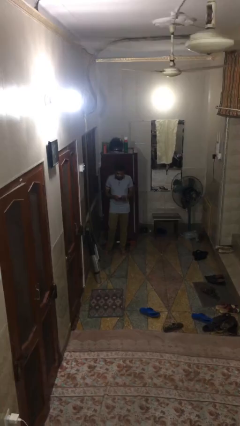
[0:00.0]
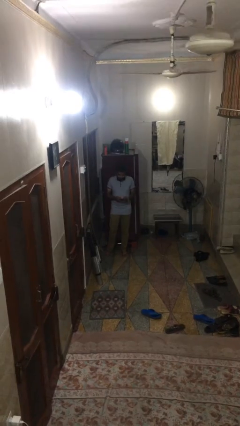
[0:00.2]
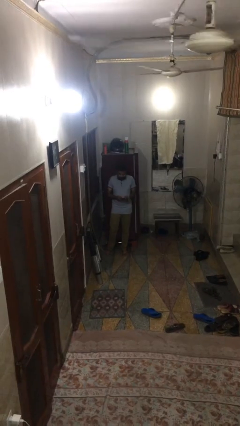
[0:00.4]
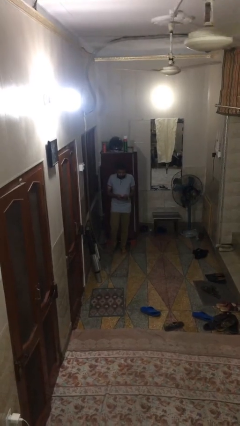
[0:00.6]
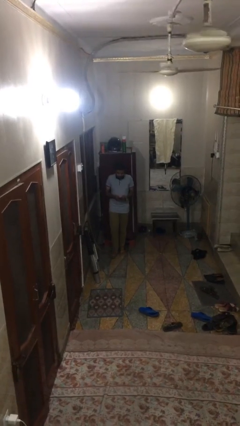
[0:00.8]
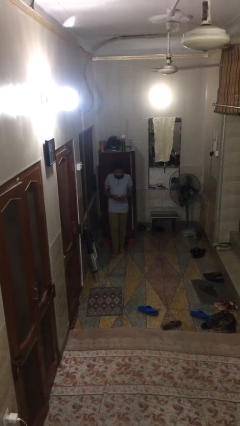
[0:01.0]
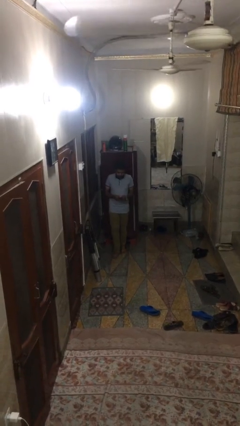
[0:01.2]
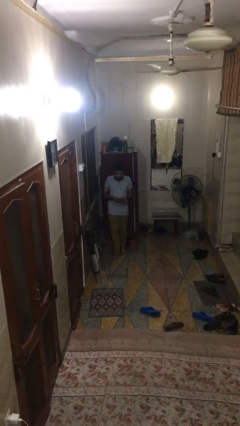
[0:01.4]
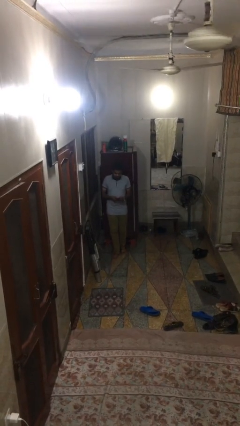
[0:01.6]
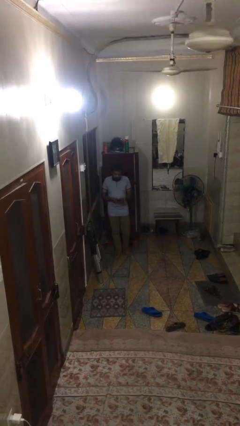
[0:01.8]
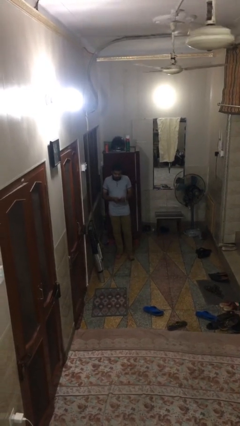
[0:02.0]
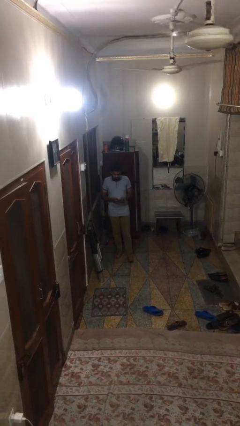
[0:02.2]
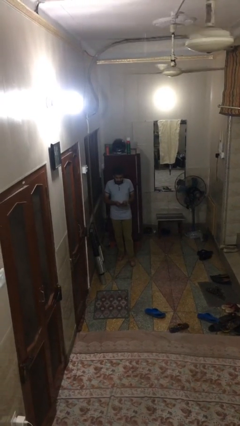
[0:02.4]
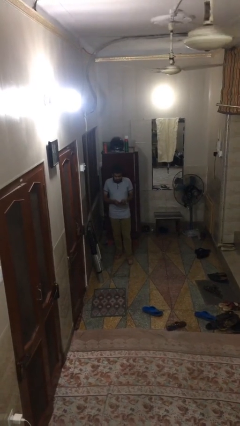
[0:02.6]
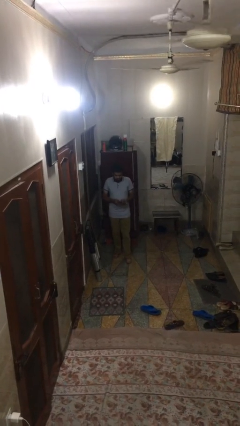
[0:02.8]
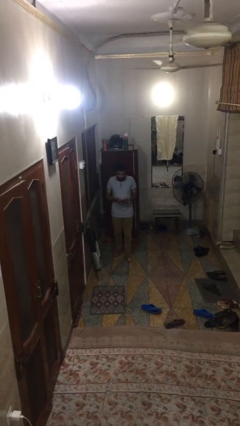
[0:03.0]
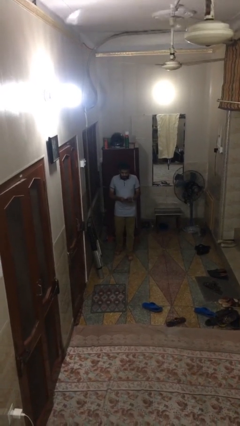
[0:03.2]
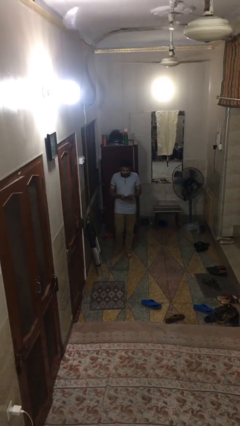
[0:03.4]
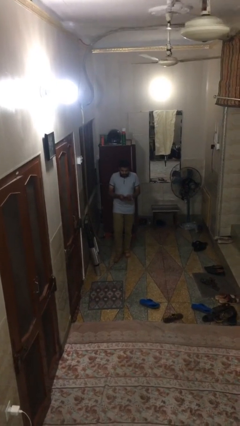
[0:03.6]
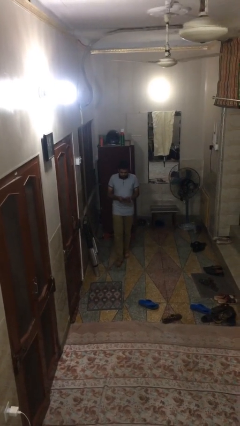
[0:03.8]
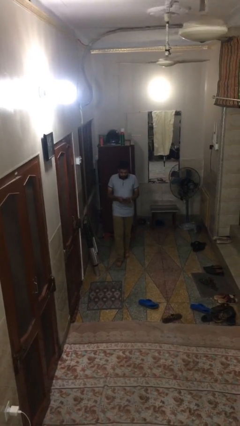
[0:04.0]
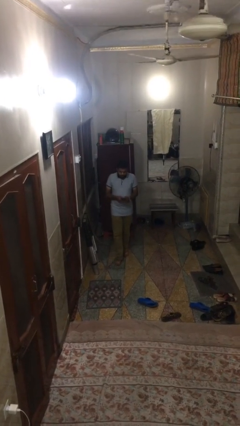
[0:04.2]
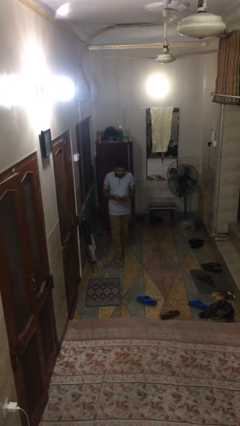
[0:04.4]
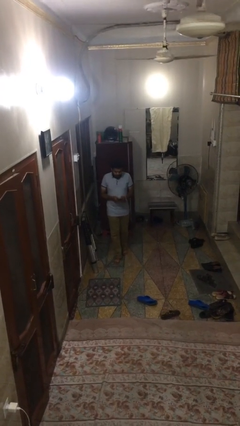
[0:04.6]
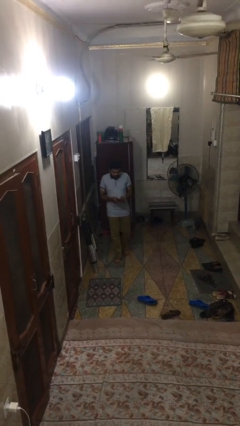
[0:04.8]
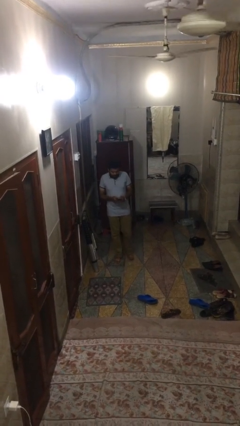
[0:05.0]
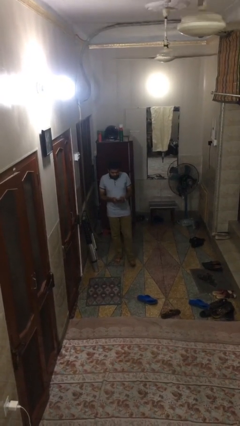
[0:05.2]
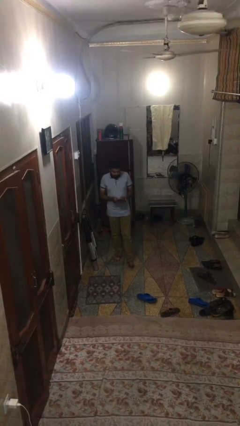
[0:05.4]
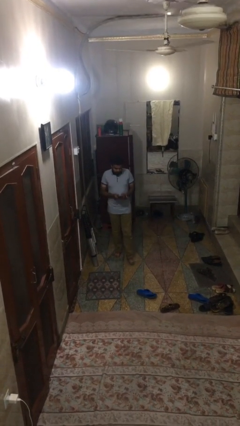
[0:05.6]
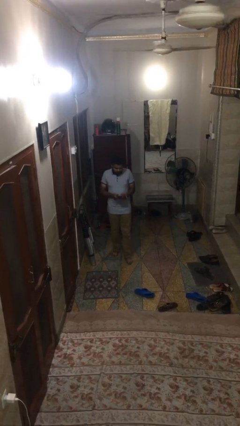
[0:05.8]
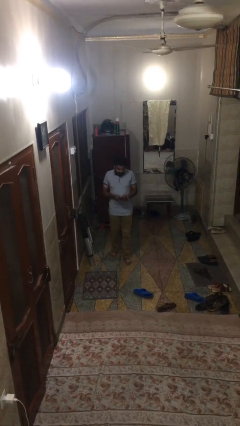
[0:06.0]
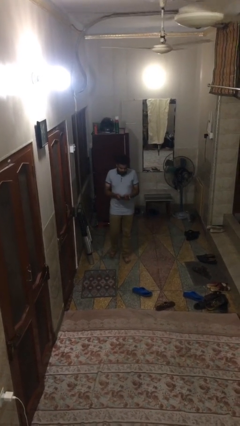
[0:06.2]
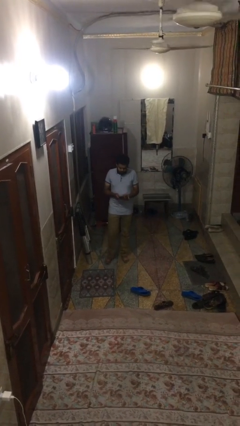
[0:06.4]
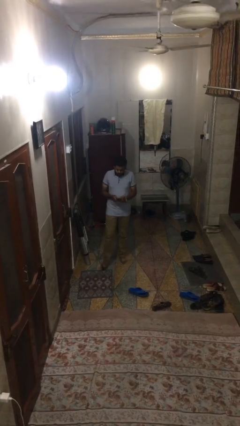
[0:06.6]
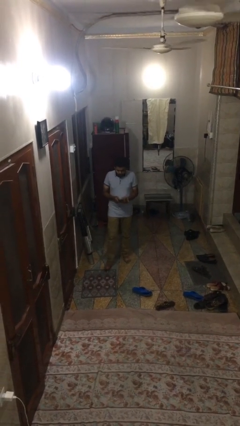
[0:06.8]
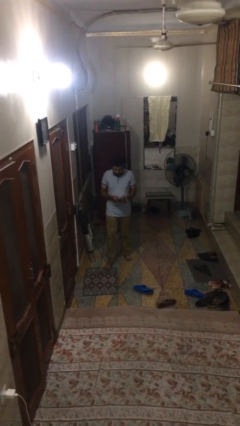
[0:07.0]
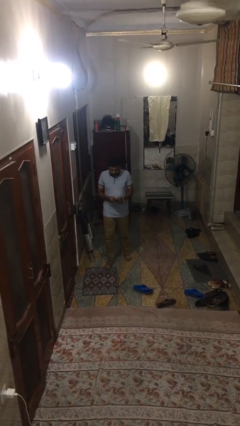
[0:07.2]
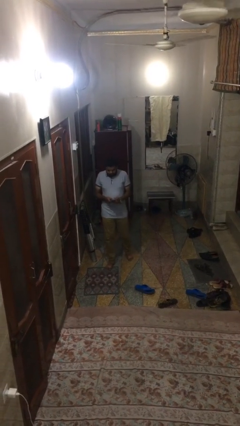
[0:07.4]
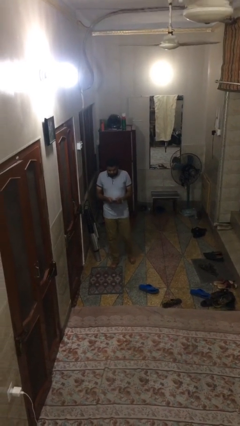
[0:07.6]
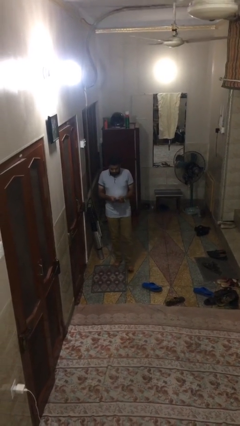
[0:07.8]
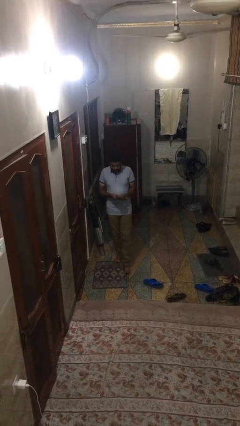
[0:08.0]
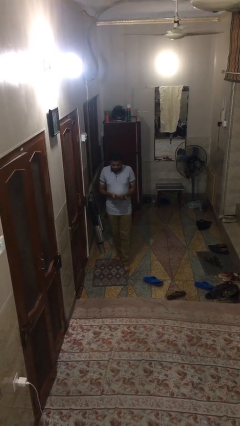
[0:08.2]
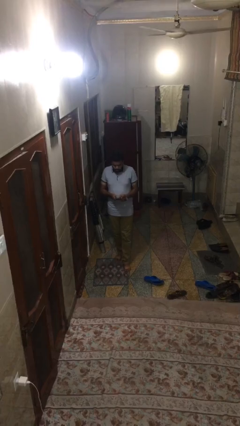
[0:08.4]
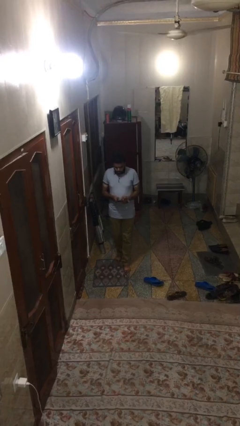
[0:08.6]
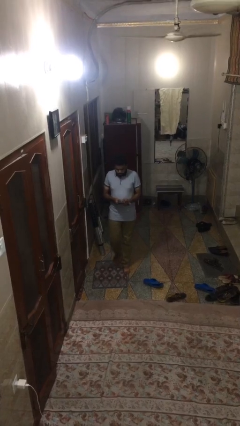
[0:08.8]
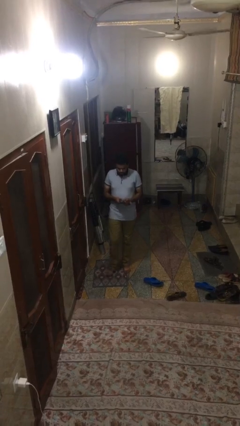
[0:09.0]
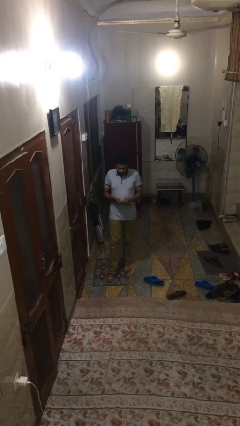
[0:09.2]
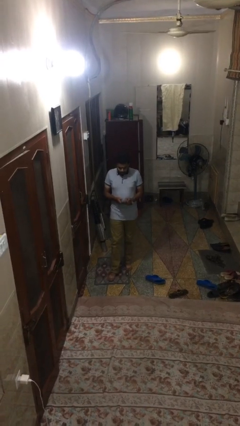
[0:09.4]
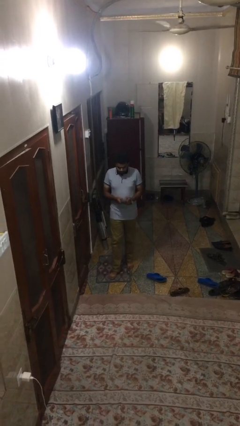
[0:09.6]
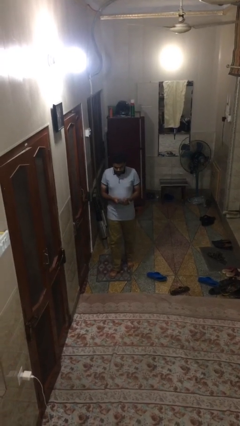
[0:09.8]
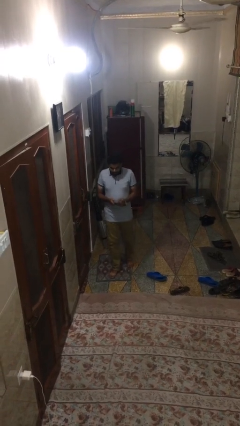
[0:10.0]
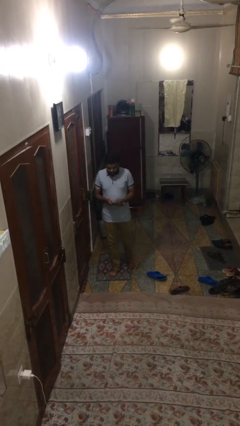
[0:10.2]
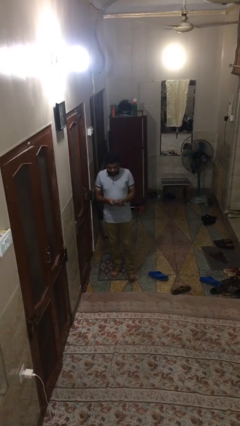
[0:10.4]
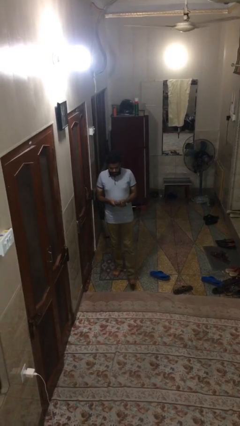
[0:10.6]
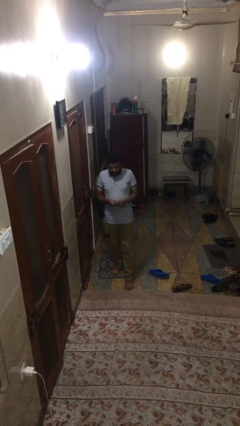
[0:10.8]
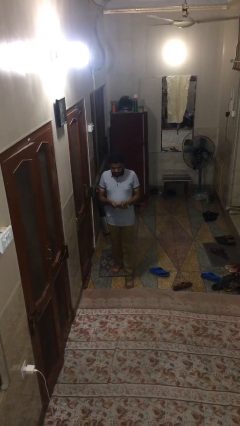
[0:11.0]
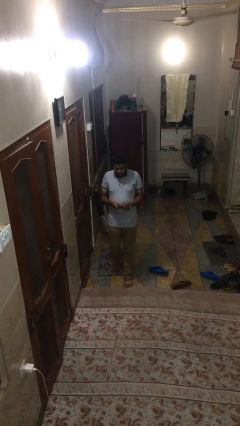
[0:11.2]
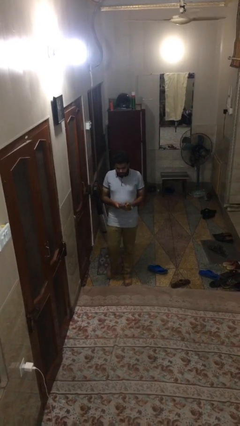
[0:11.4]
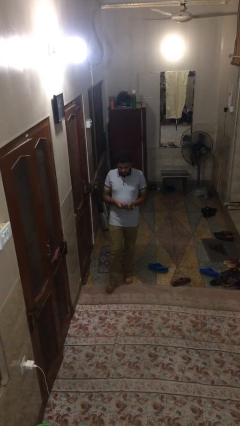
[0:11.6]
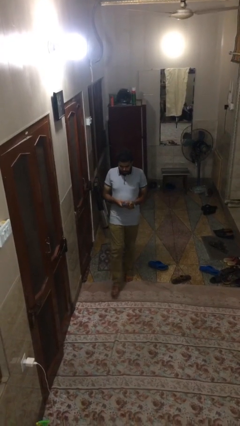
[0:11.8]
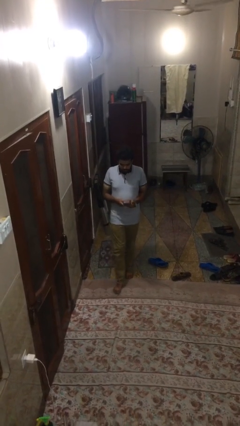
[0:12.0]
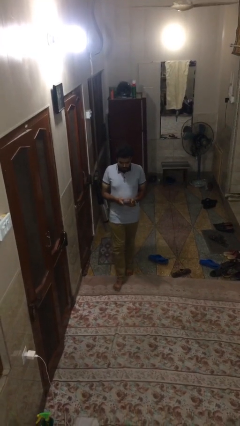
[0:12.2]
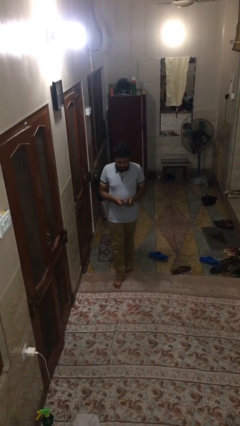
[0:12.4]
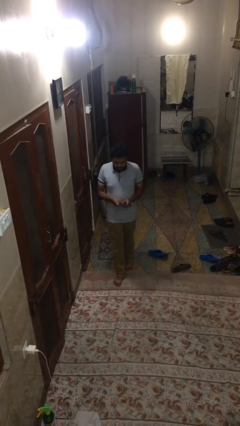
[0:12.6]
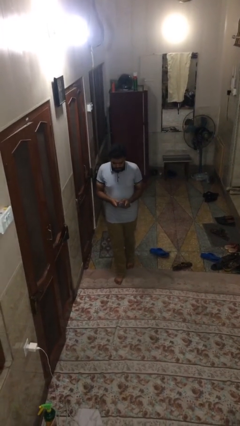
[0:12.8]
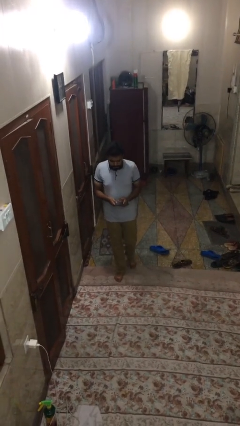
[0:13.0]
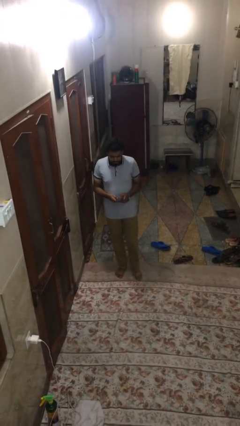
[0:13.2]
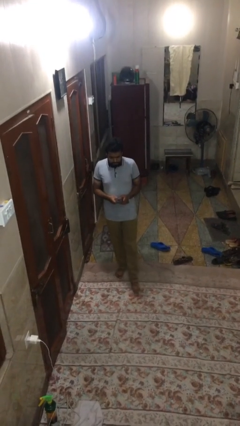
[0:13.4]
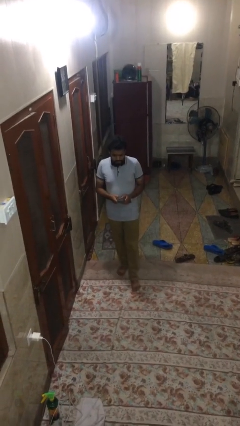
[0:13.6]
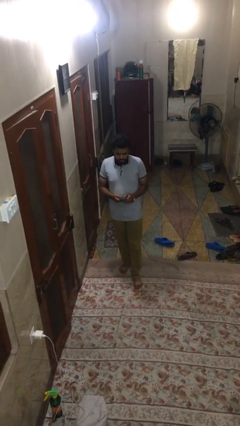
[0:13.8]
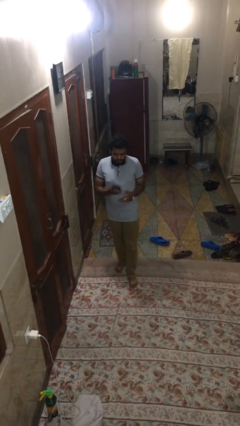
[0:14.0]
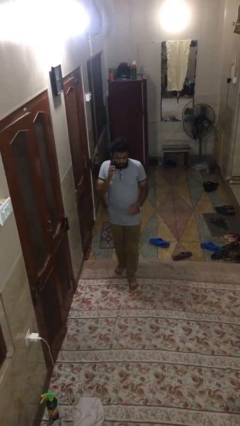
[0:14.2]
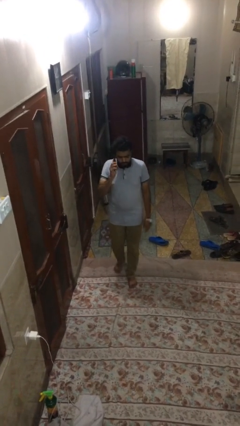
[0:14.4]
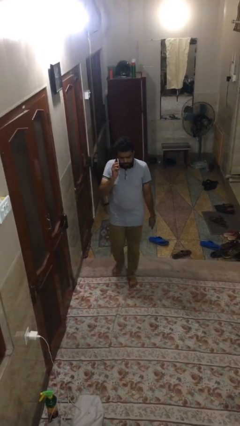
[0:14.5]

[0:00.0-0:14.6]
person texts on phone

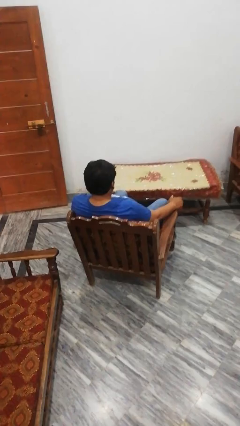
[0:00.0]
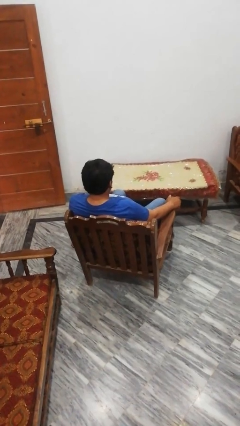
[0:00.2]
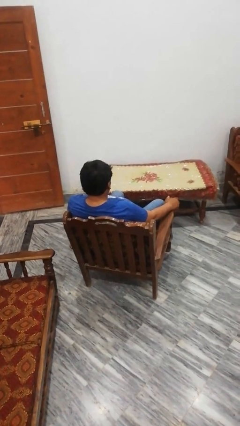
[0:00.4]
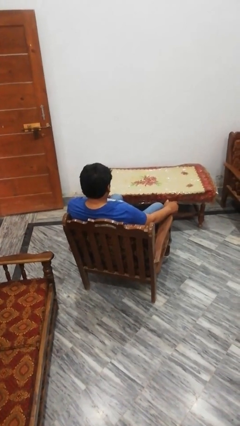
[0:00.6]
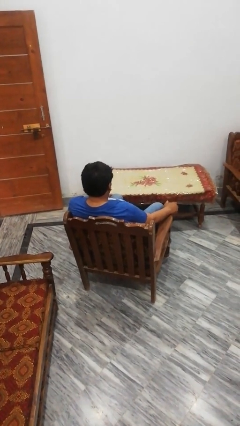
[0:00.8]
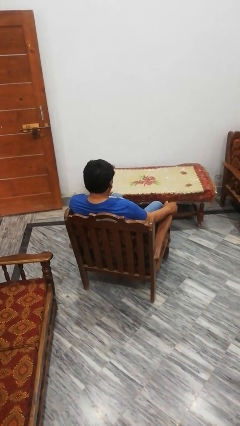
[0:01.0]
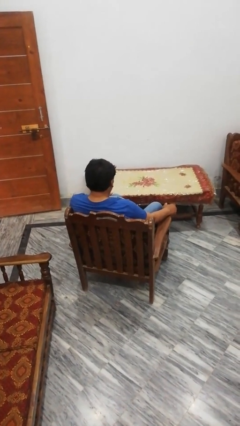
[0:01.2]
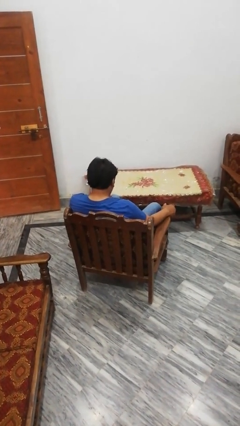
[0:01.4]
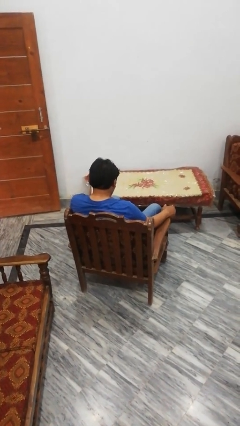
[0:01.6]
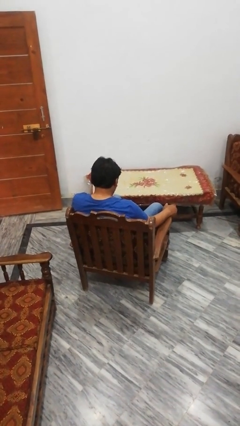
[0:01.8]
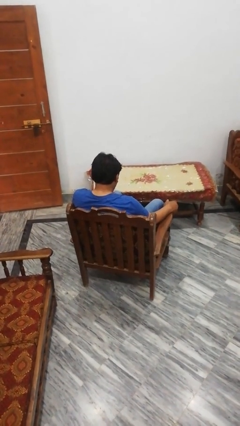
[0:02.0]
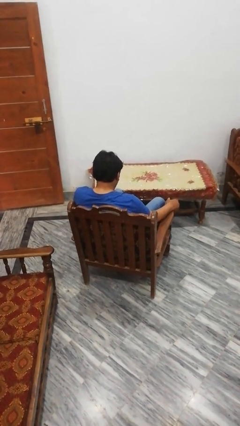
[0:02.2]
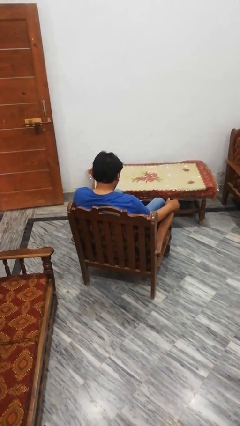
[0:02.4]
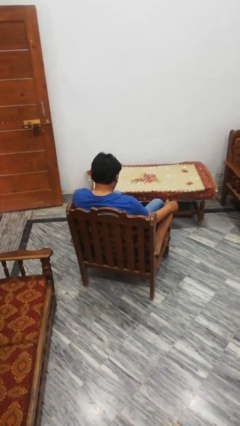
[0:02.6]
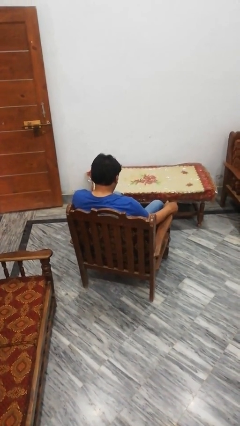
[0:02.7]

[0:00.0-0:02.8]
person pushes in chair

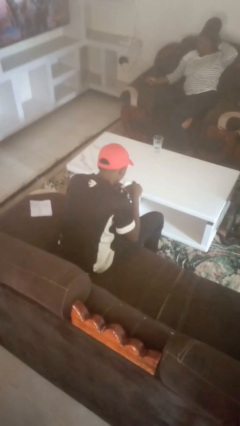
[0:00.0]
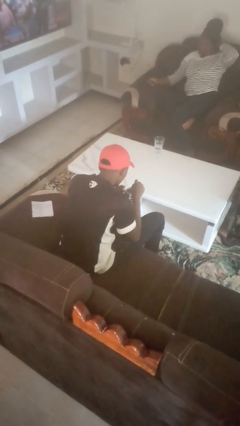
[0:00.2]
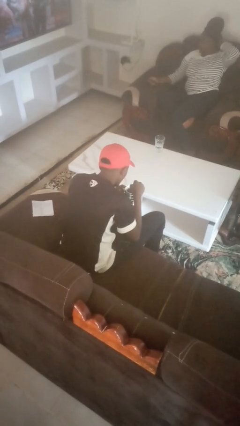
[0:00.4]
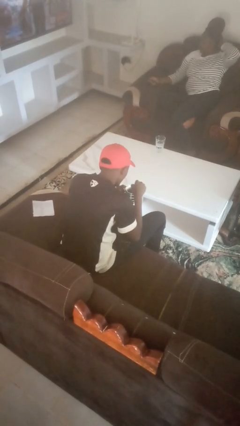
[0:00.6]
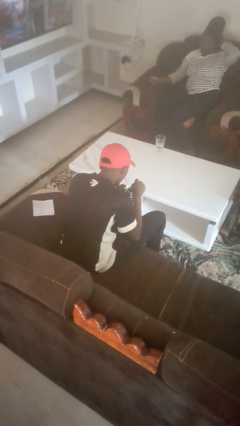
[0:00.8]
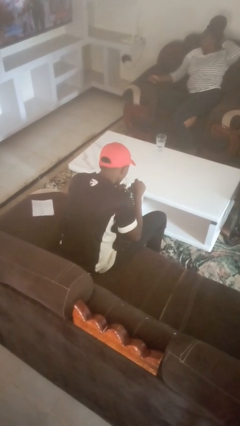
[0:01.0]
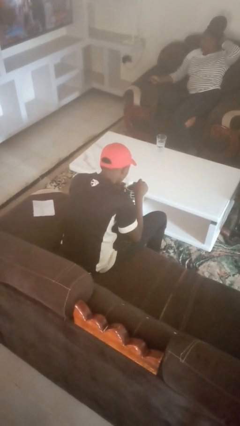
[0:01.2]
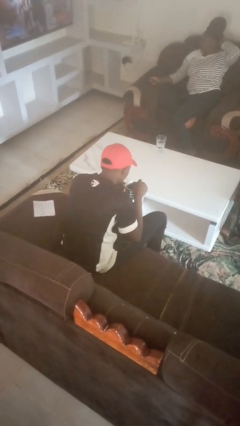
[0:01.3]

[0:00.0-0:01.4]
person stirs mug
